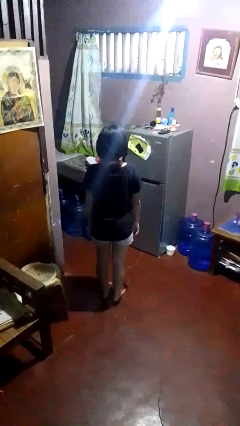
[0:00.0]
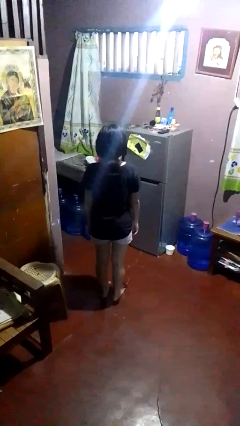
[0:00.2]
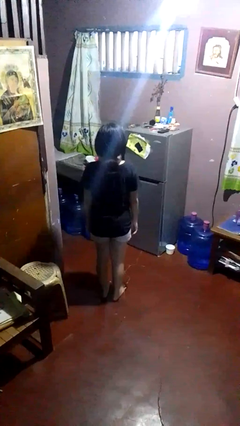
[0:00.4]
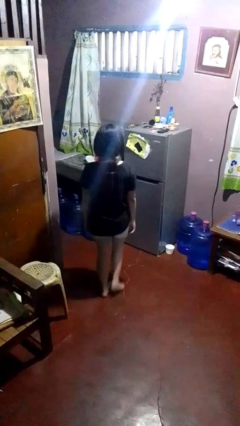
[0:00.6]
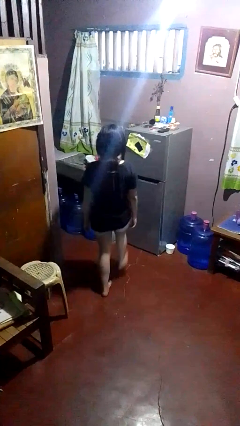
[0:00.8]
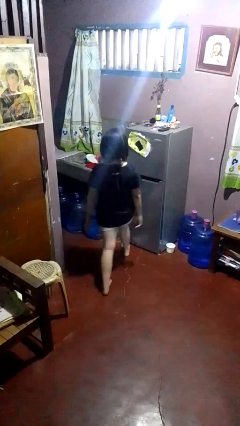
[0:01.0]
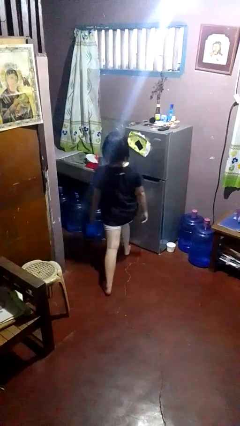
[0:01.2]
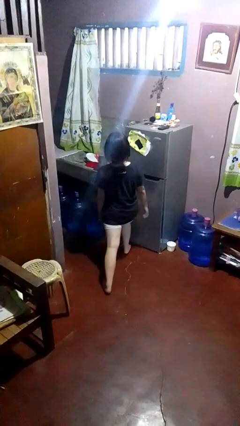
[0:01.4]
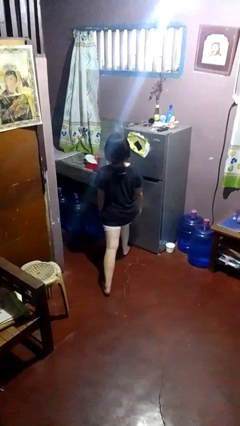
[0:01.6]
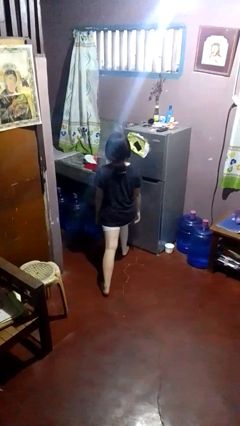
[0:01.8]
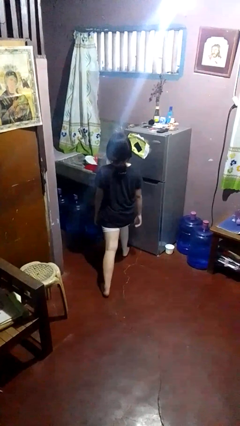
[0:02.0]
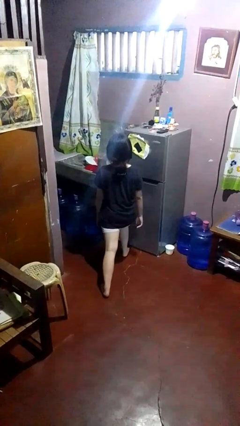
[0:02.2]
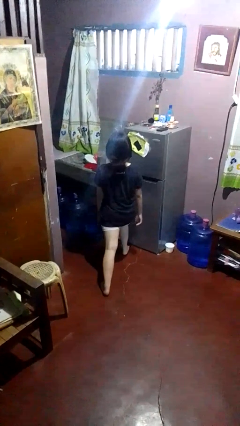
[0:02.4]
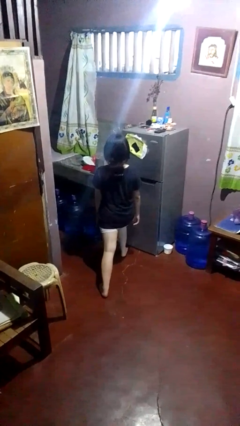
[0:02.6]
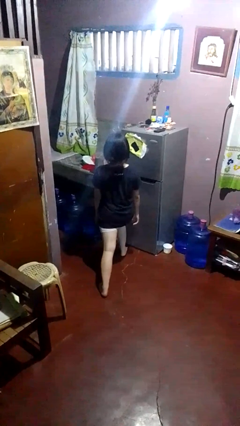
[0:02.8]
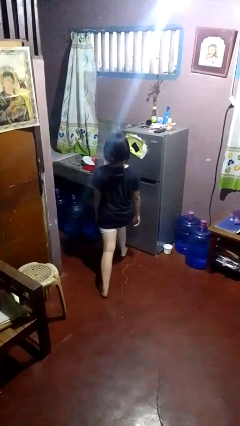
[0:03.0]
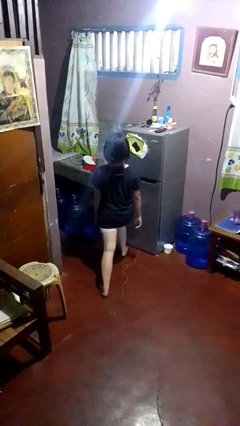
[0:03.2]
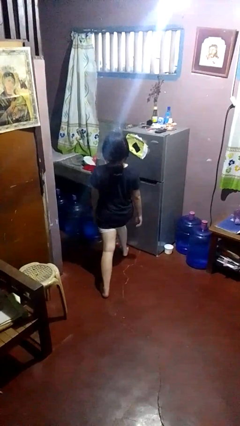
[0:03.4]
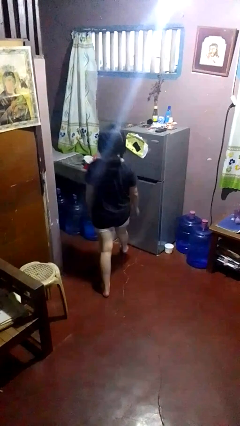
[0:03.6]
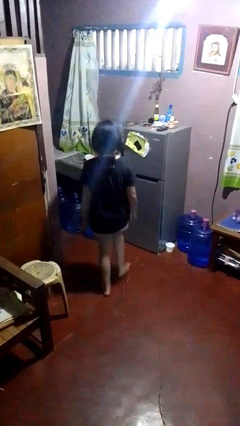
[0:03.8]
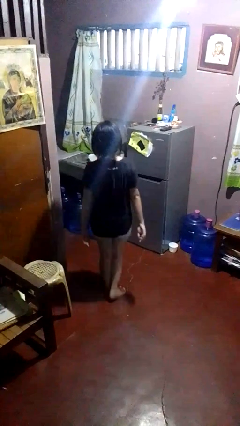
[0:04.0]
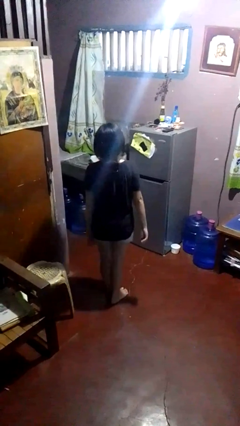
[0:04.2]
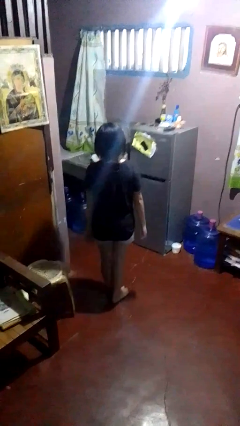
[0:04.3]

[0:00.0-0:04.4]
person exercises with lunges

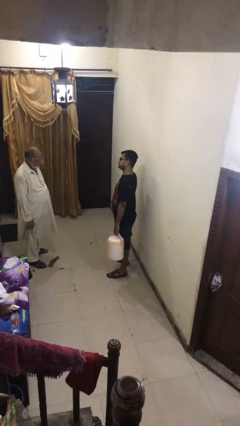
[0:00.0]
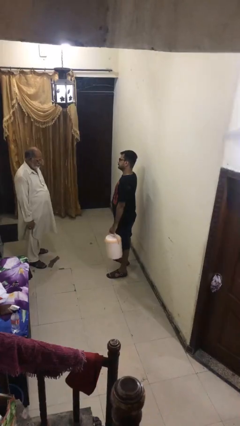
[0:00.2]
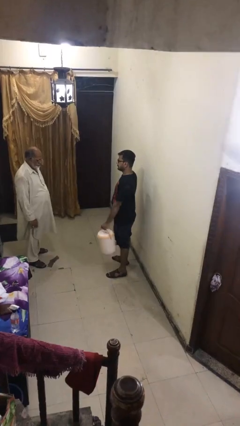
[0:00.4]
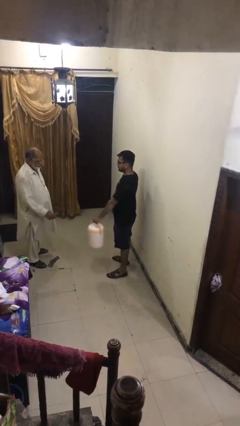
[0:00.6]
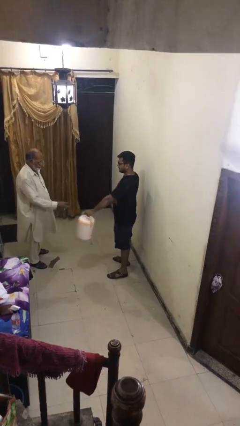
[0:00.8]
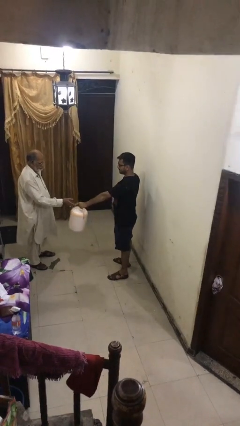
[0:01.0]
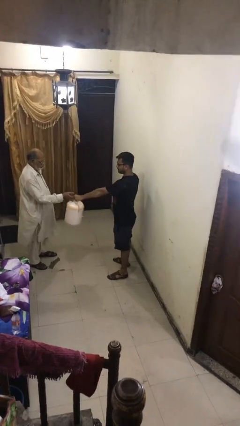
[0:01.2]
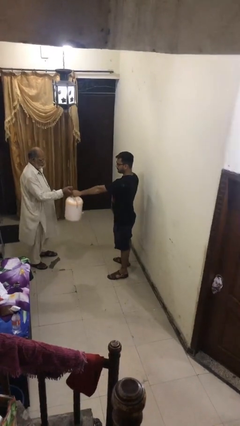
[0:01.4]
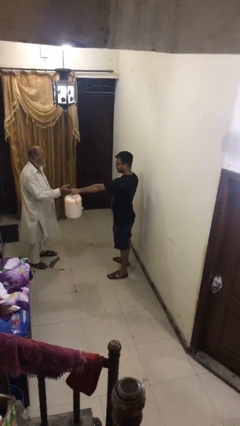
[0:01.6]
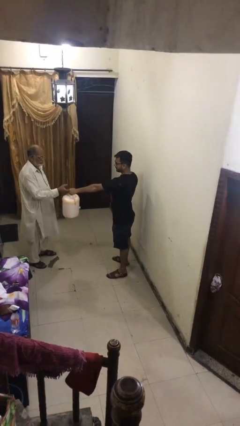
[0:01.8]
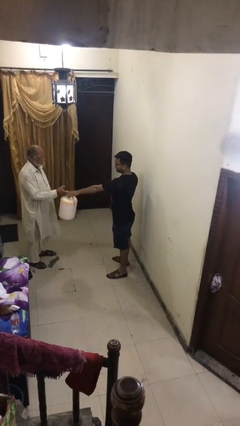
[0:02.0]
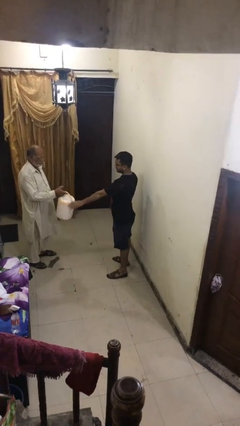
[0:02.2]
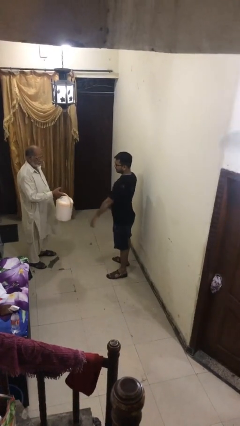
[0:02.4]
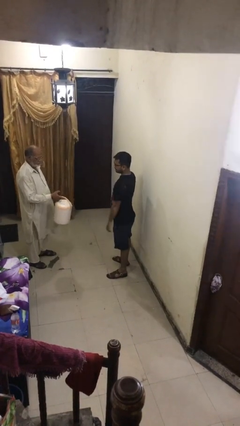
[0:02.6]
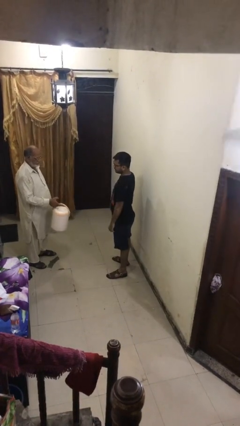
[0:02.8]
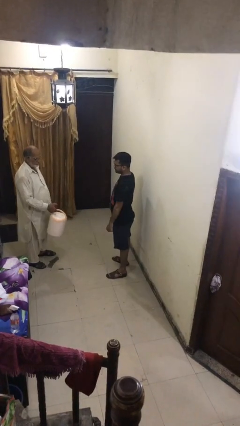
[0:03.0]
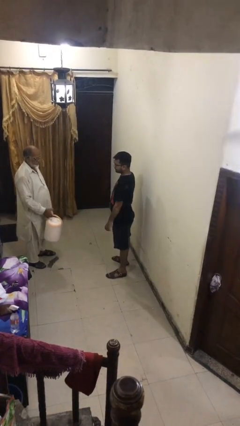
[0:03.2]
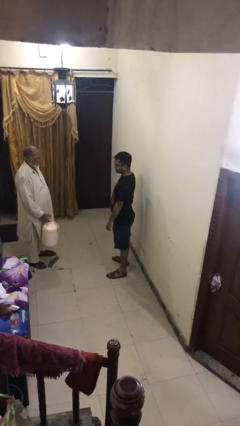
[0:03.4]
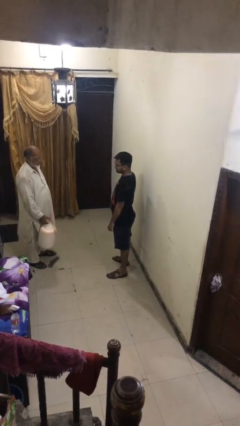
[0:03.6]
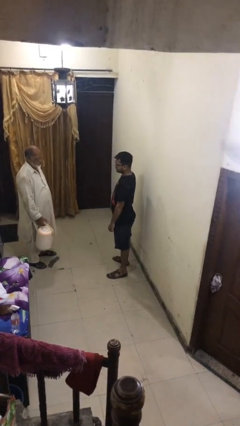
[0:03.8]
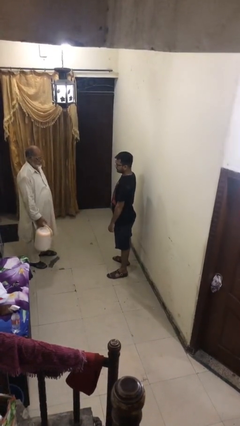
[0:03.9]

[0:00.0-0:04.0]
person transfers object to person

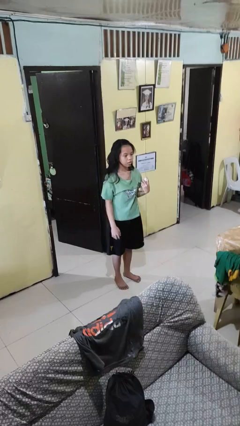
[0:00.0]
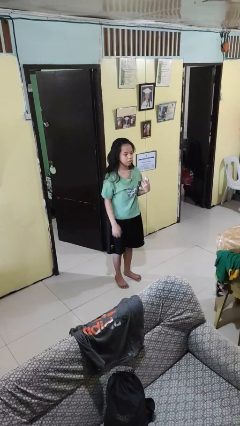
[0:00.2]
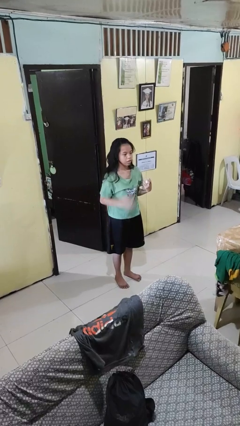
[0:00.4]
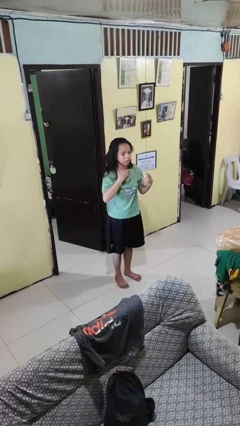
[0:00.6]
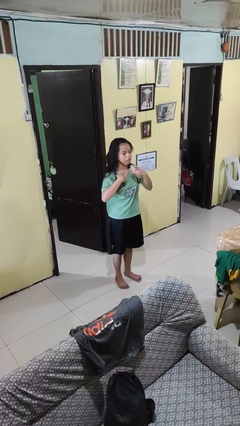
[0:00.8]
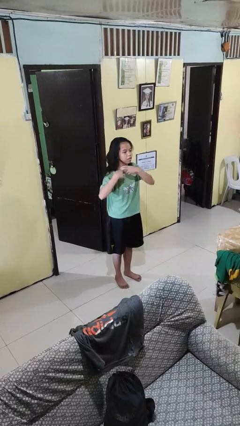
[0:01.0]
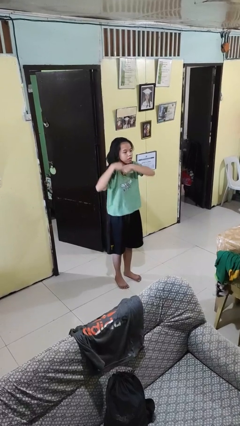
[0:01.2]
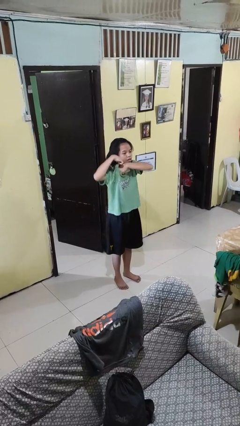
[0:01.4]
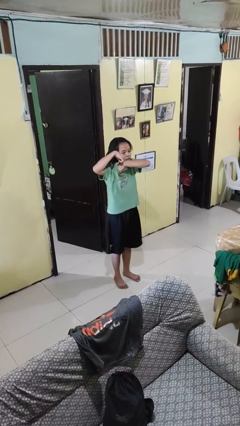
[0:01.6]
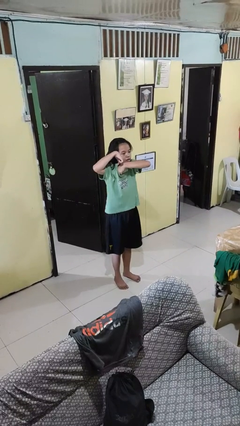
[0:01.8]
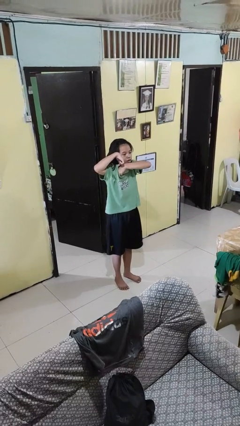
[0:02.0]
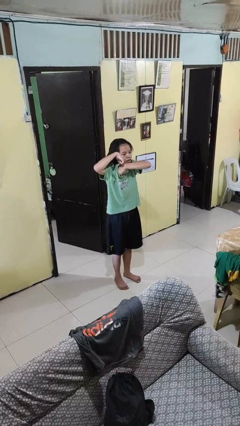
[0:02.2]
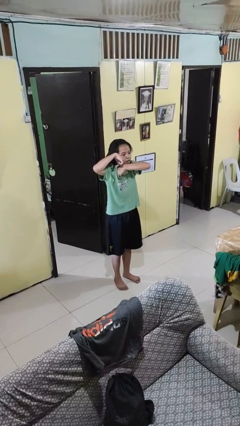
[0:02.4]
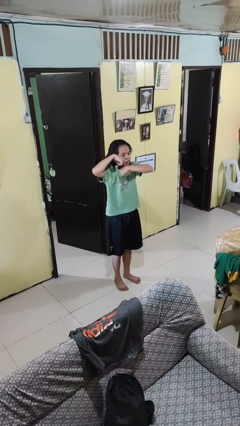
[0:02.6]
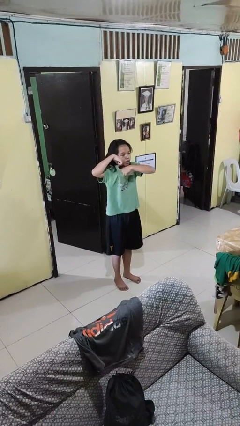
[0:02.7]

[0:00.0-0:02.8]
person applies deodorant

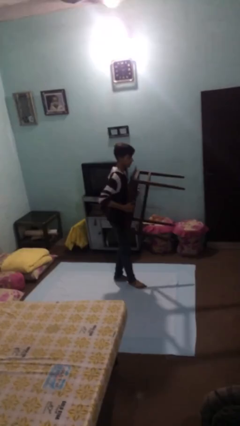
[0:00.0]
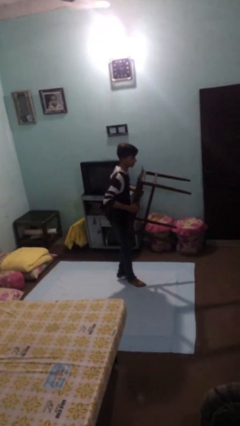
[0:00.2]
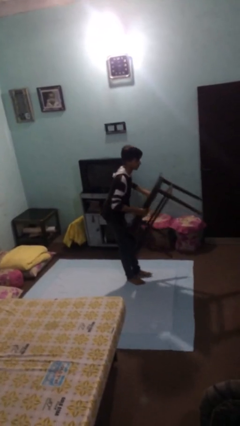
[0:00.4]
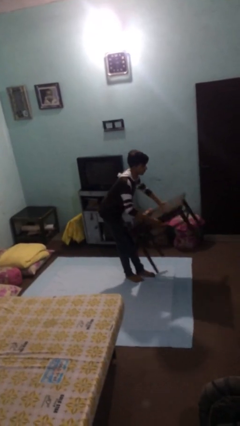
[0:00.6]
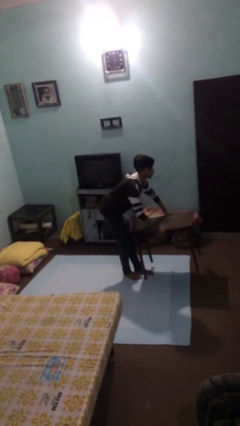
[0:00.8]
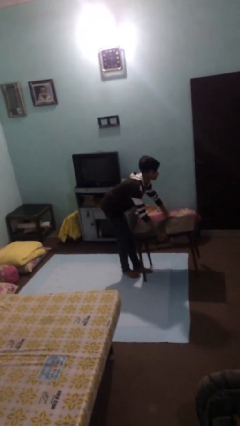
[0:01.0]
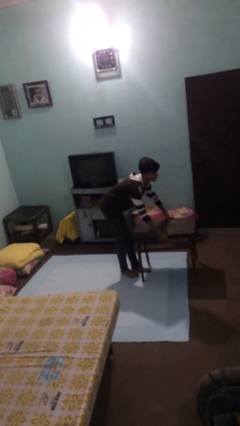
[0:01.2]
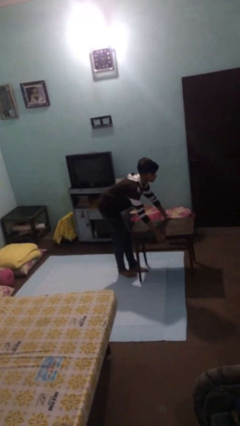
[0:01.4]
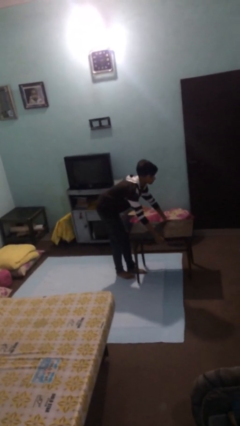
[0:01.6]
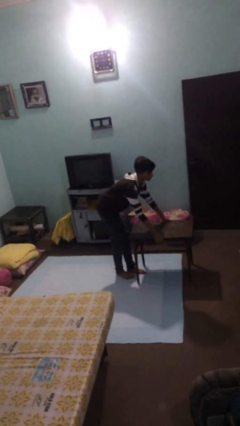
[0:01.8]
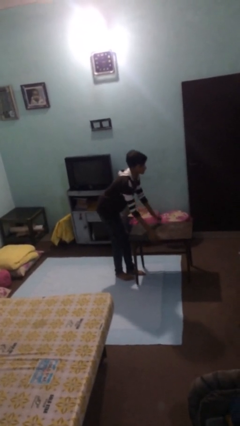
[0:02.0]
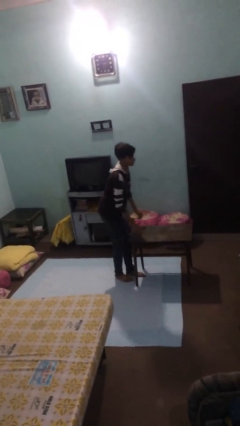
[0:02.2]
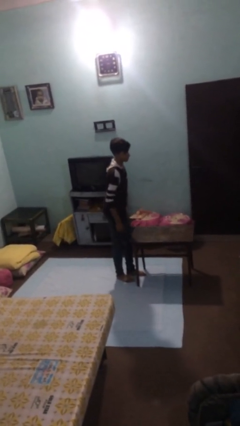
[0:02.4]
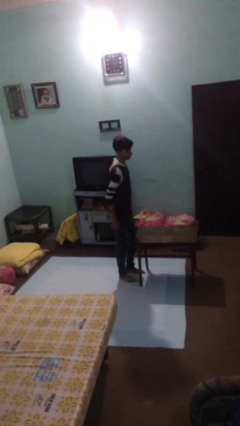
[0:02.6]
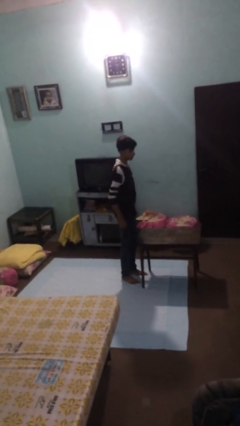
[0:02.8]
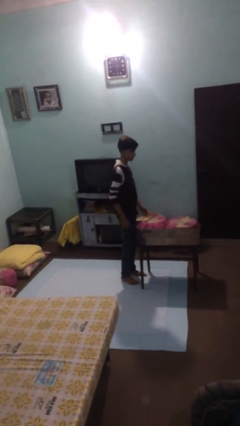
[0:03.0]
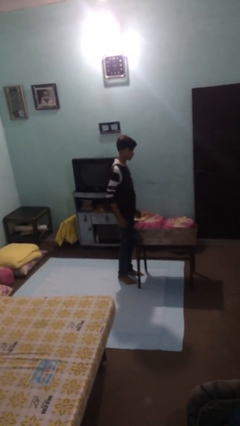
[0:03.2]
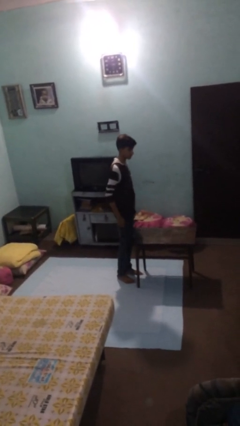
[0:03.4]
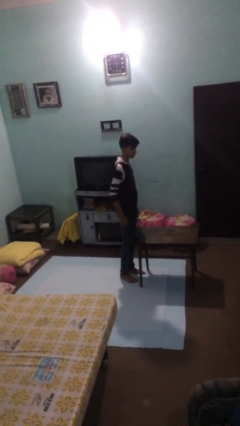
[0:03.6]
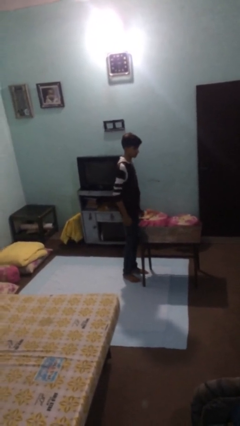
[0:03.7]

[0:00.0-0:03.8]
person puts down object on floor

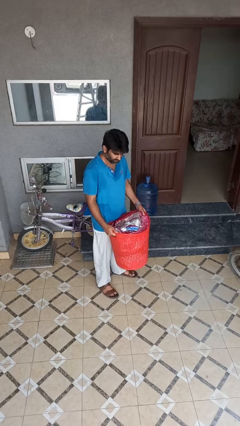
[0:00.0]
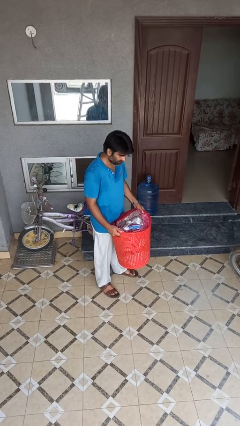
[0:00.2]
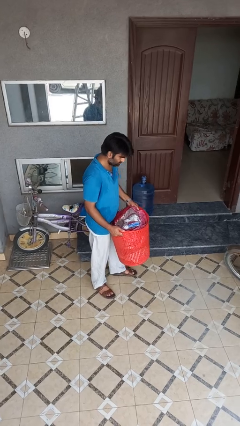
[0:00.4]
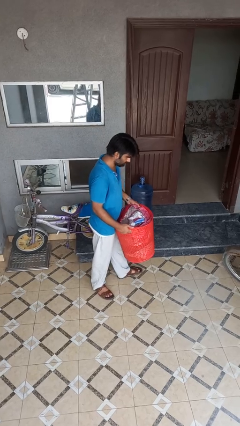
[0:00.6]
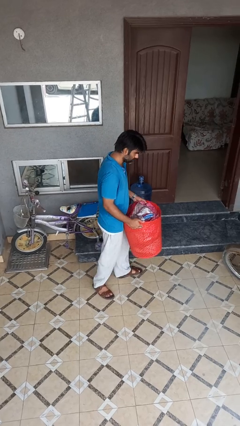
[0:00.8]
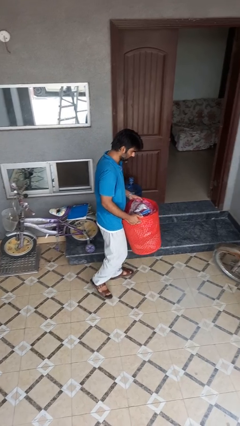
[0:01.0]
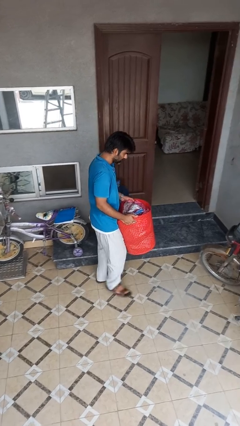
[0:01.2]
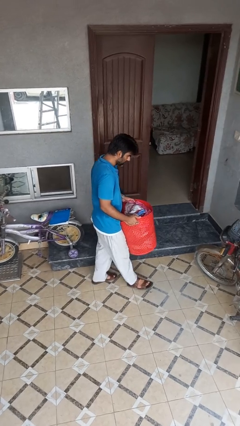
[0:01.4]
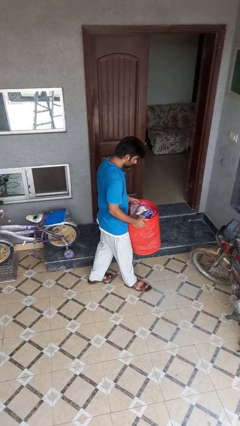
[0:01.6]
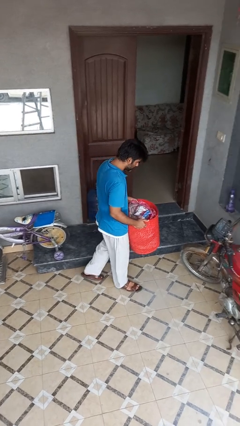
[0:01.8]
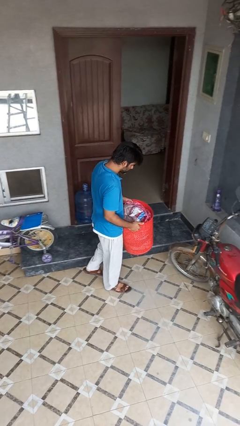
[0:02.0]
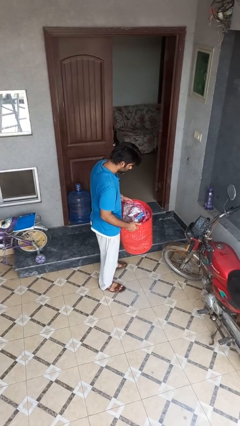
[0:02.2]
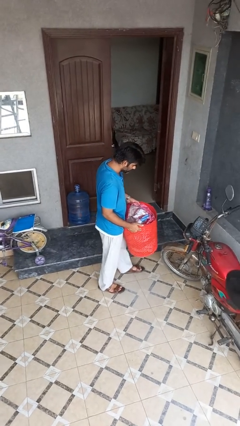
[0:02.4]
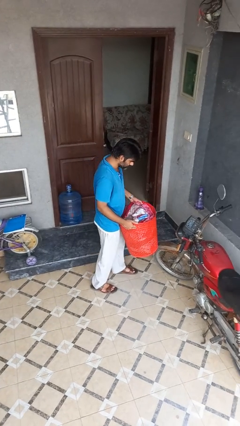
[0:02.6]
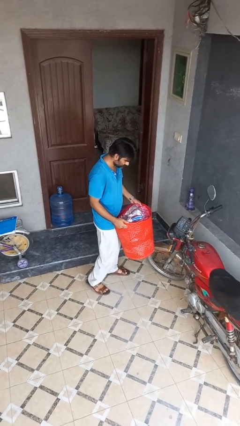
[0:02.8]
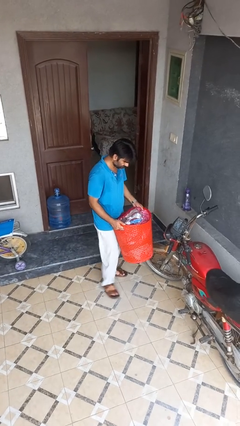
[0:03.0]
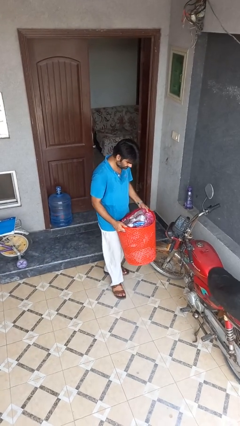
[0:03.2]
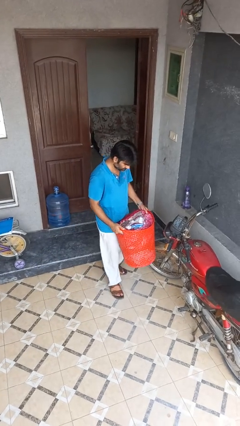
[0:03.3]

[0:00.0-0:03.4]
person carries laundry basket
